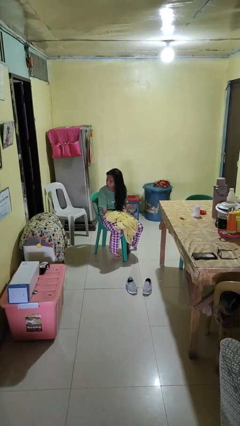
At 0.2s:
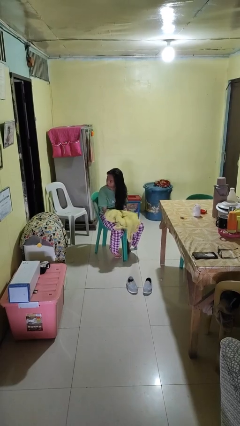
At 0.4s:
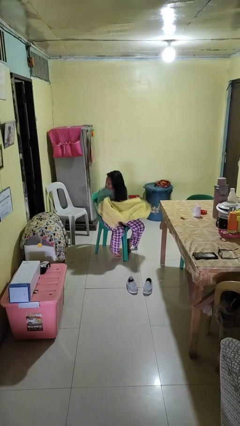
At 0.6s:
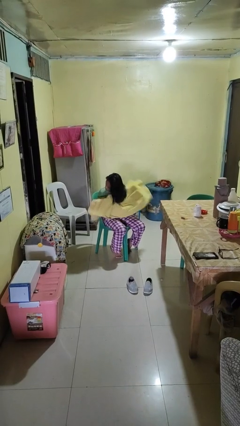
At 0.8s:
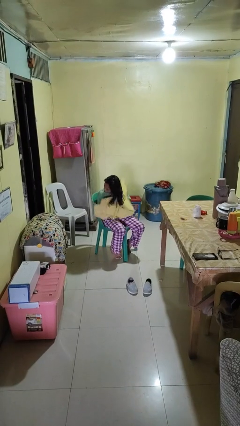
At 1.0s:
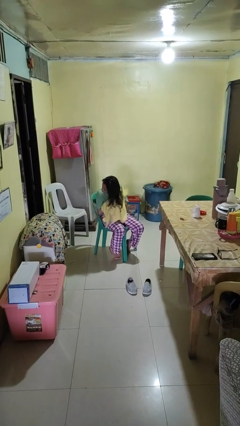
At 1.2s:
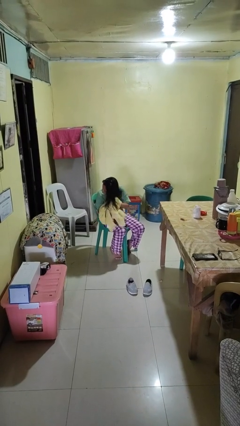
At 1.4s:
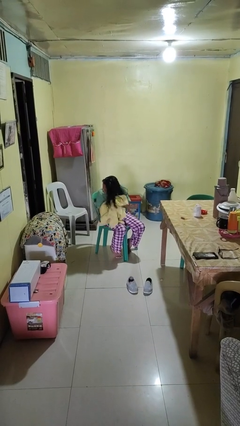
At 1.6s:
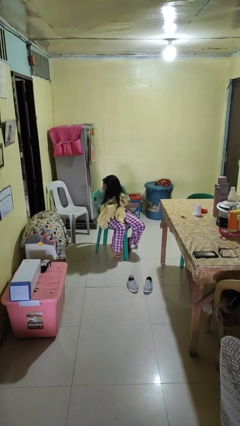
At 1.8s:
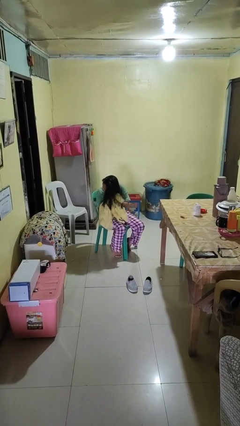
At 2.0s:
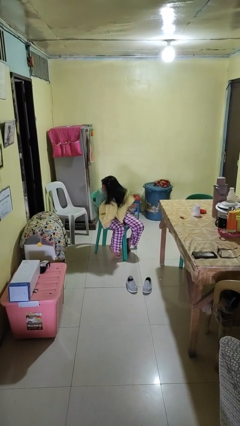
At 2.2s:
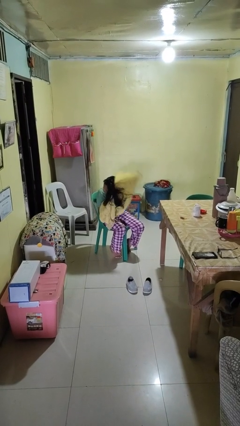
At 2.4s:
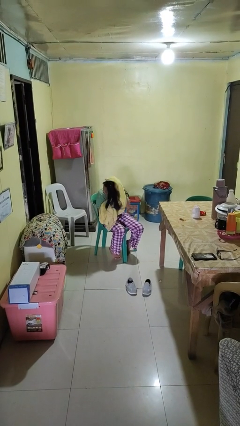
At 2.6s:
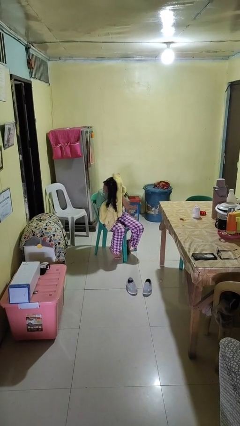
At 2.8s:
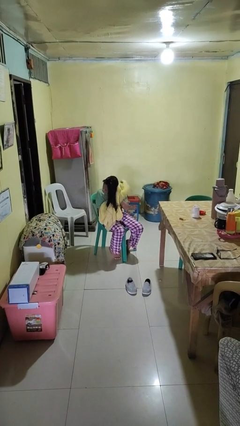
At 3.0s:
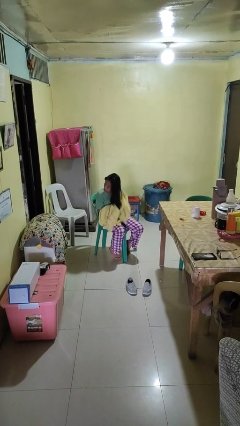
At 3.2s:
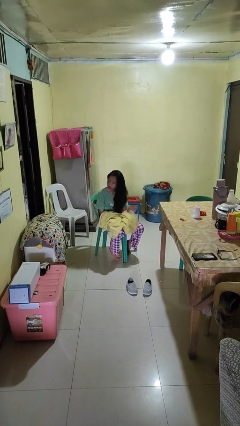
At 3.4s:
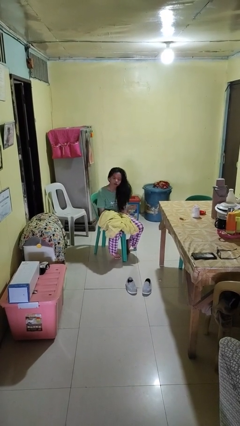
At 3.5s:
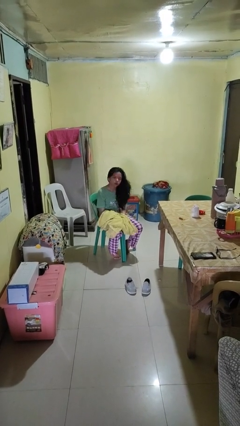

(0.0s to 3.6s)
person dries hair with towel

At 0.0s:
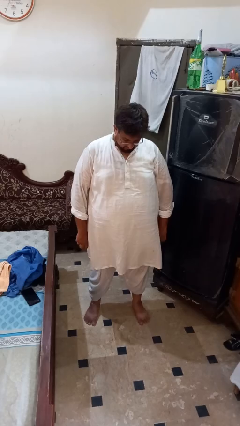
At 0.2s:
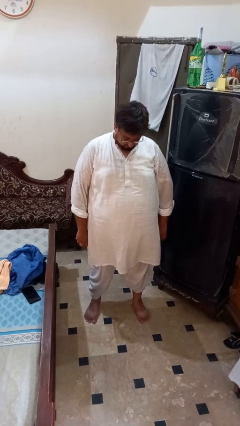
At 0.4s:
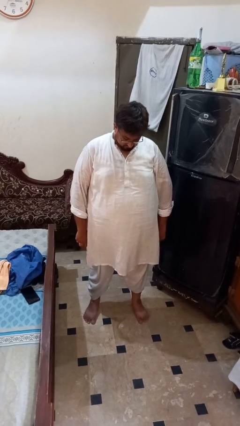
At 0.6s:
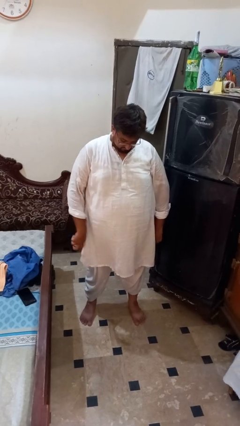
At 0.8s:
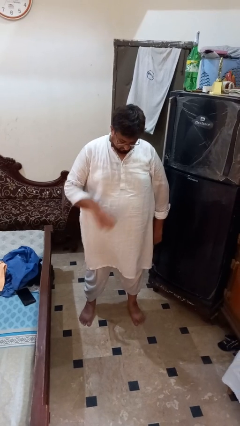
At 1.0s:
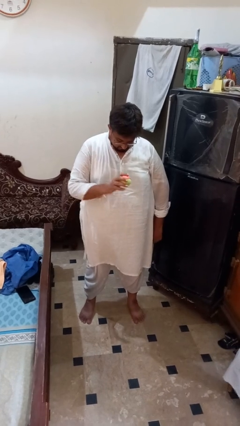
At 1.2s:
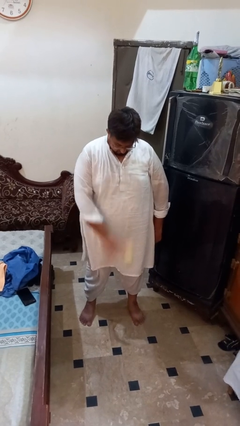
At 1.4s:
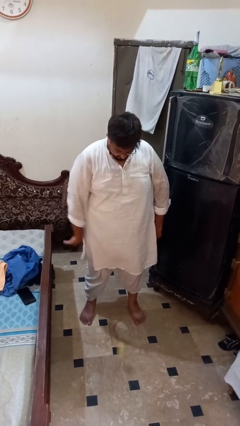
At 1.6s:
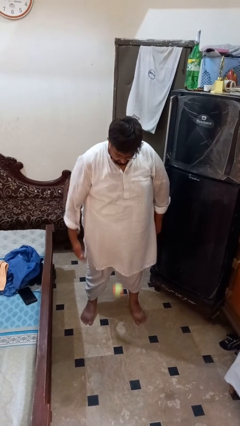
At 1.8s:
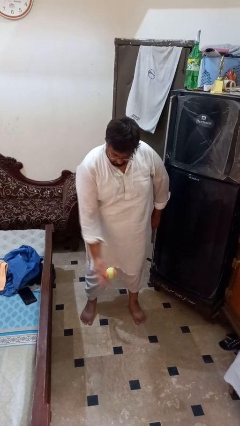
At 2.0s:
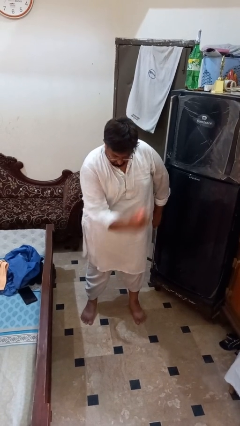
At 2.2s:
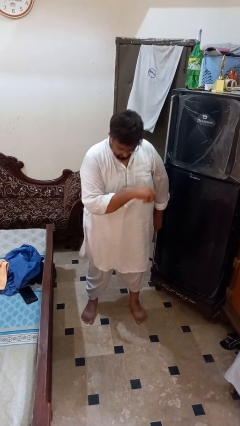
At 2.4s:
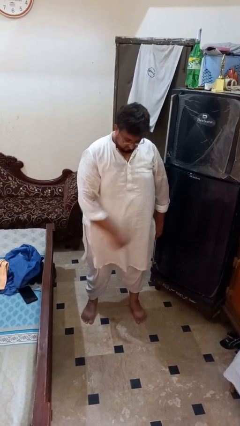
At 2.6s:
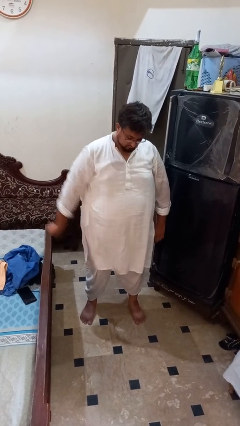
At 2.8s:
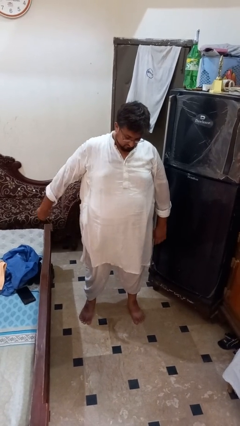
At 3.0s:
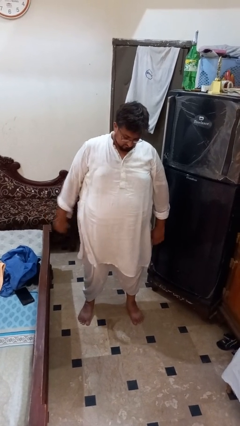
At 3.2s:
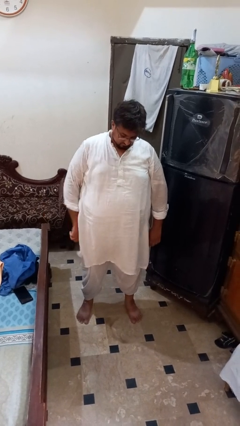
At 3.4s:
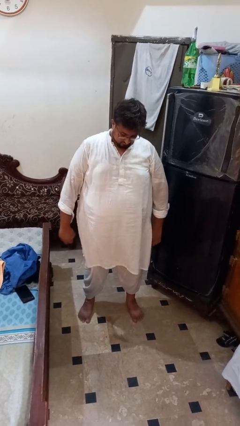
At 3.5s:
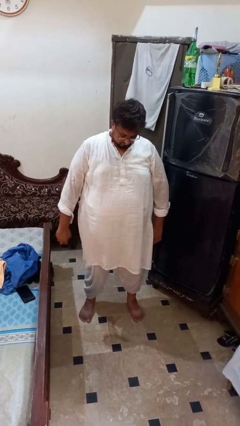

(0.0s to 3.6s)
person bounces ball on floor

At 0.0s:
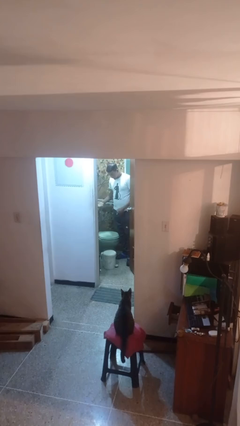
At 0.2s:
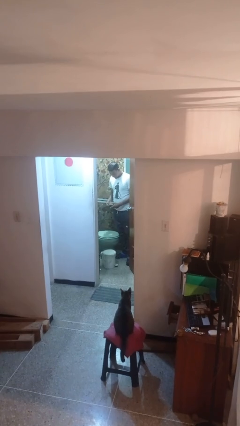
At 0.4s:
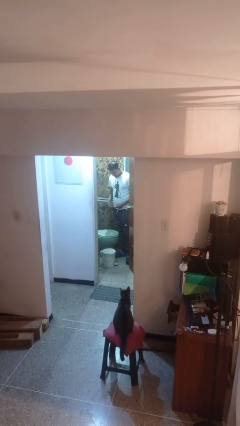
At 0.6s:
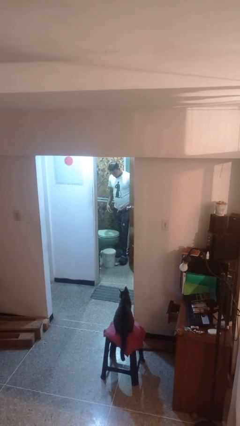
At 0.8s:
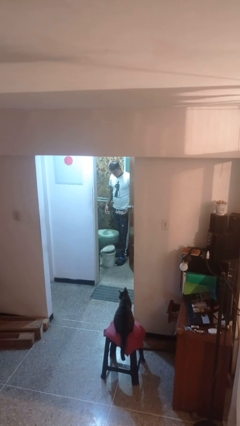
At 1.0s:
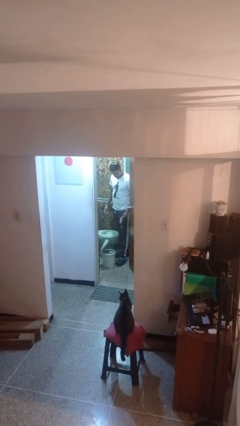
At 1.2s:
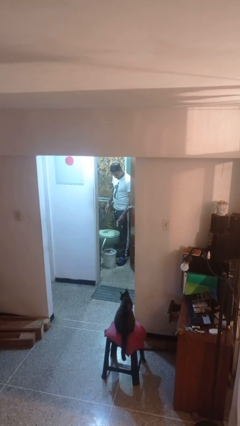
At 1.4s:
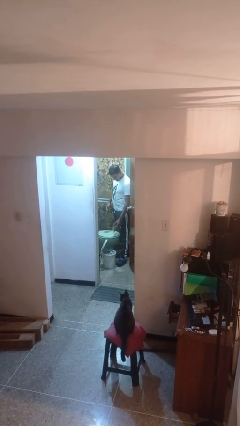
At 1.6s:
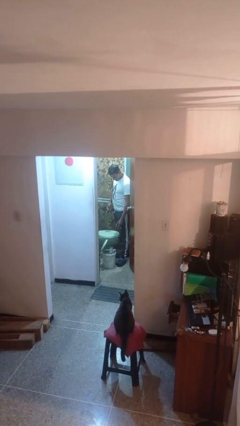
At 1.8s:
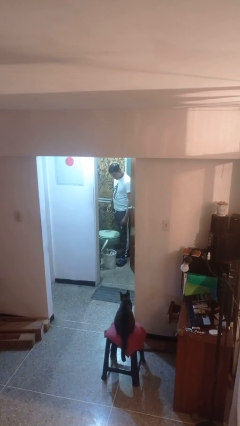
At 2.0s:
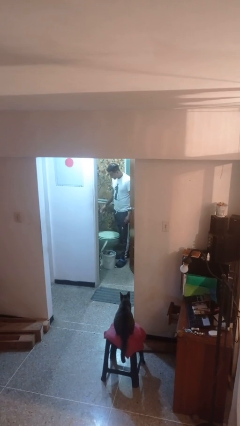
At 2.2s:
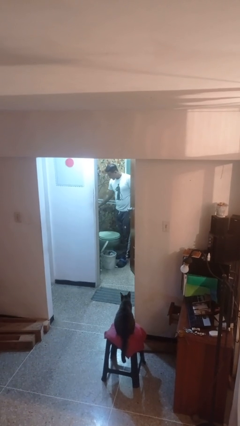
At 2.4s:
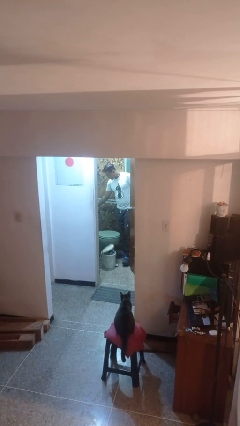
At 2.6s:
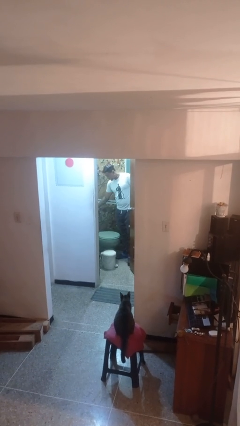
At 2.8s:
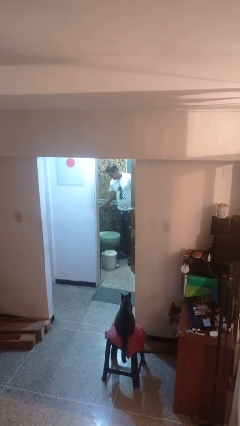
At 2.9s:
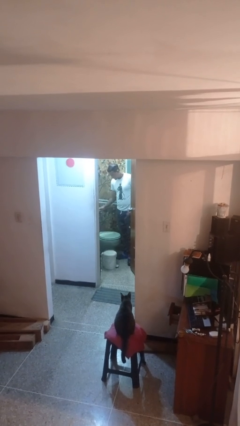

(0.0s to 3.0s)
person discards trash

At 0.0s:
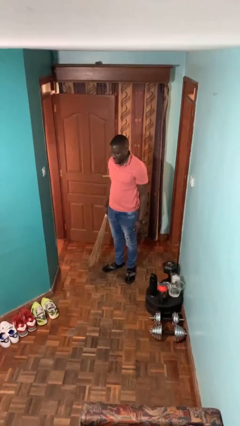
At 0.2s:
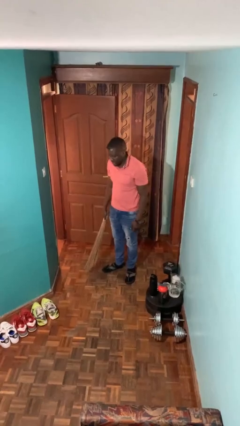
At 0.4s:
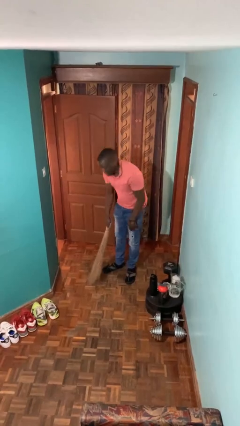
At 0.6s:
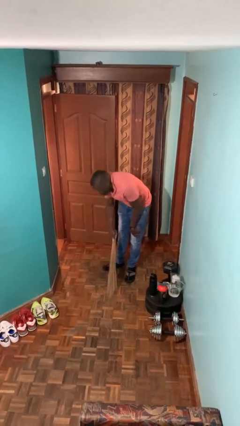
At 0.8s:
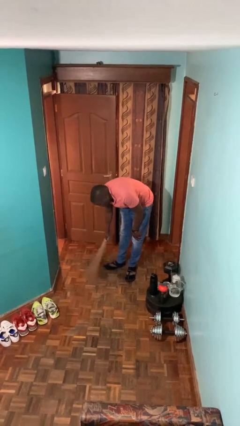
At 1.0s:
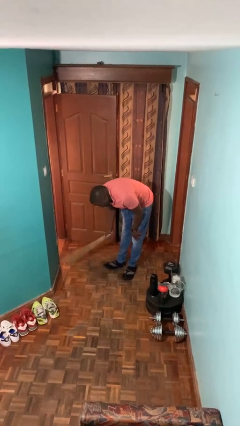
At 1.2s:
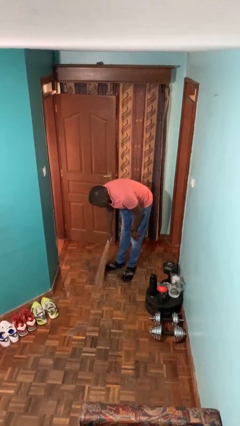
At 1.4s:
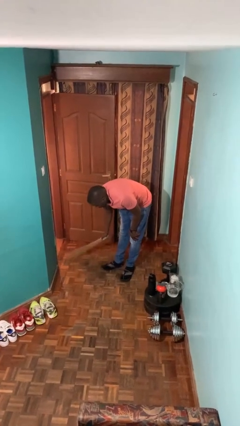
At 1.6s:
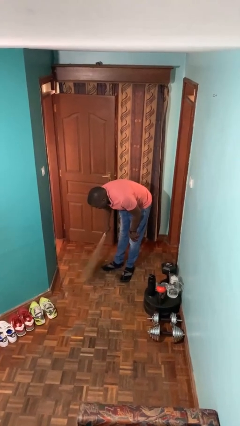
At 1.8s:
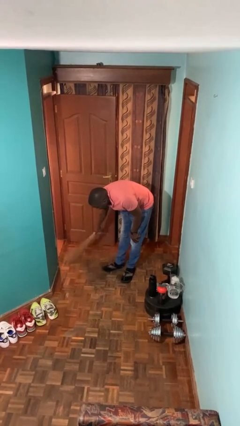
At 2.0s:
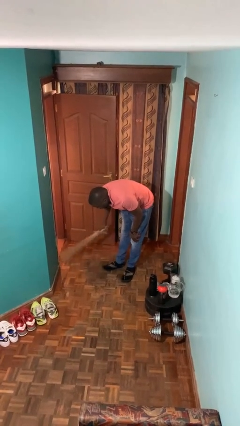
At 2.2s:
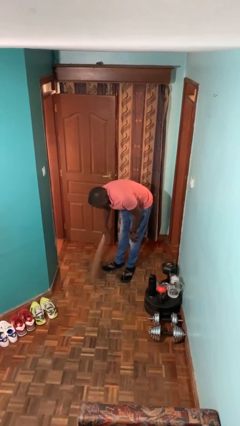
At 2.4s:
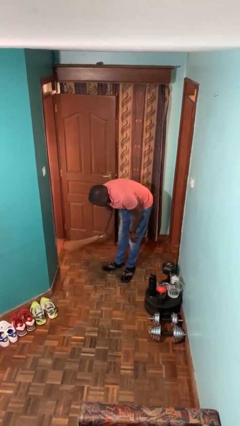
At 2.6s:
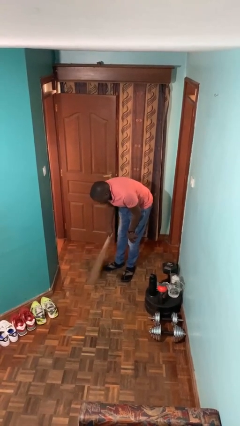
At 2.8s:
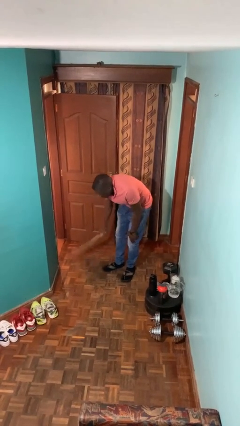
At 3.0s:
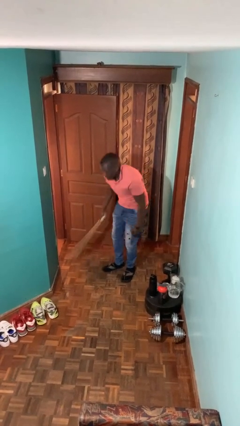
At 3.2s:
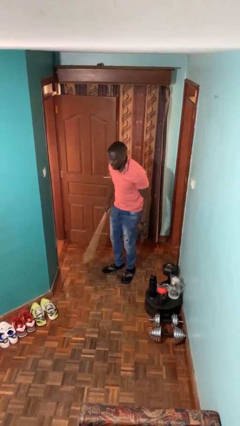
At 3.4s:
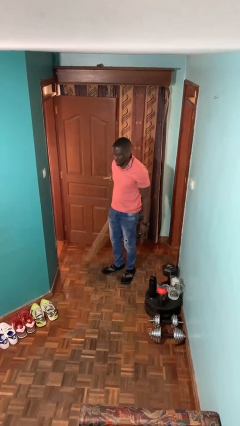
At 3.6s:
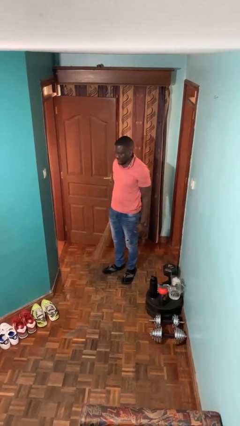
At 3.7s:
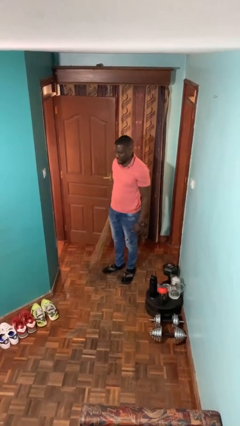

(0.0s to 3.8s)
person sweeps floor

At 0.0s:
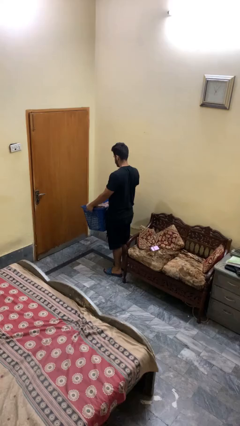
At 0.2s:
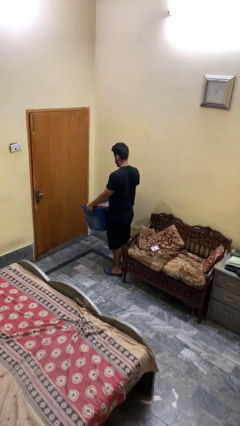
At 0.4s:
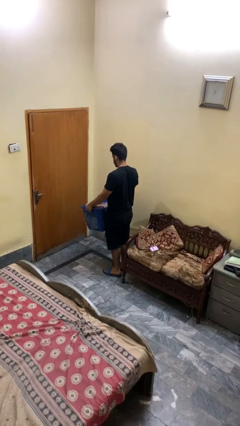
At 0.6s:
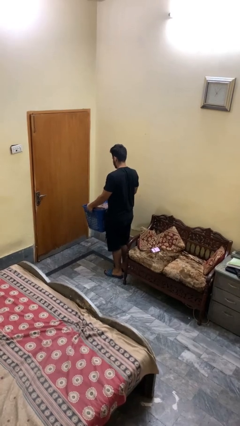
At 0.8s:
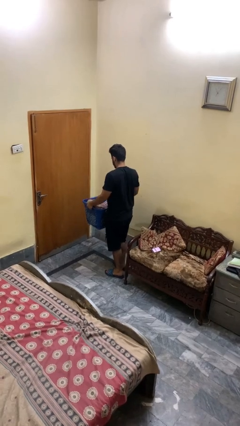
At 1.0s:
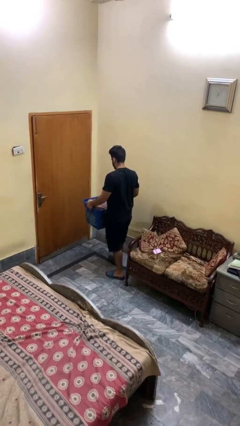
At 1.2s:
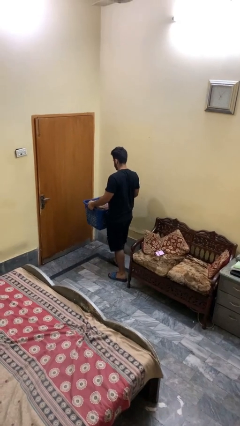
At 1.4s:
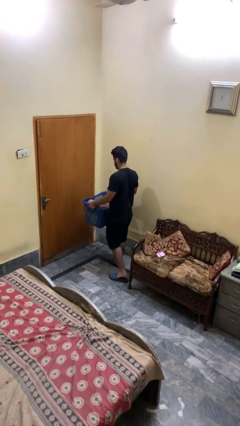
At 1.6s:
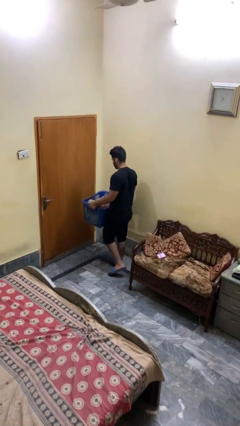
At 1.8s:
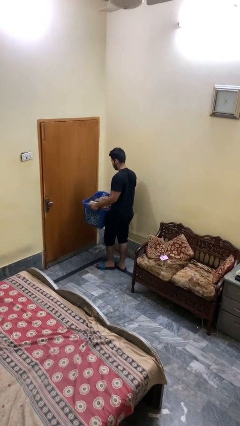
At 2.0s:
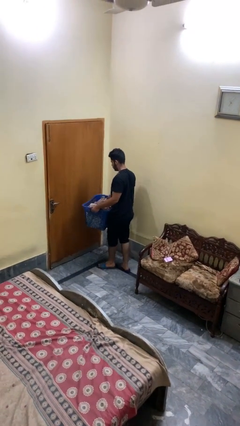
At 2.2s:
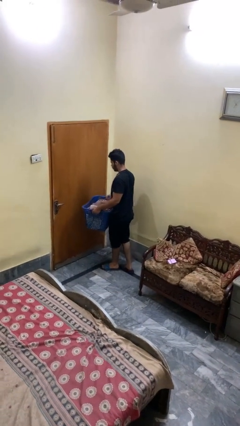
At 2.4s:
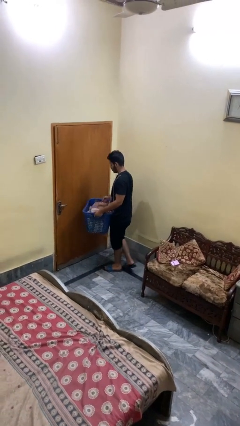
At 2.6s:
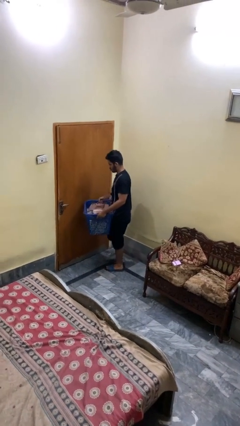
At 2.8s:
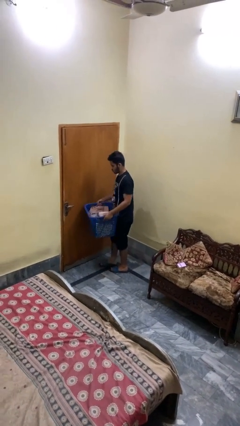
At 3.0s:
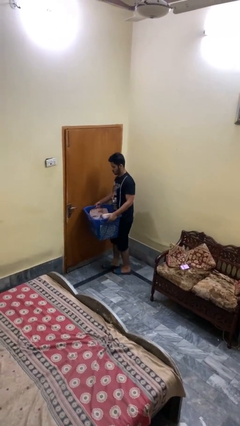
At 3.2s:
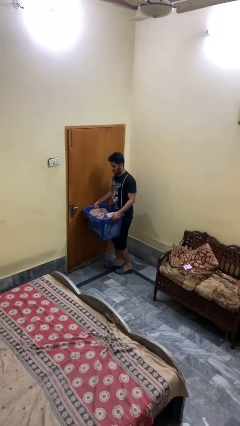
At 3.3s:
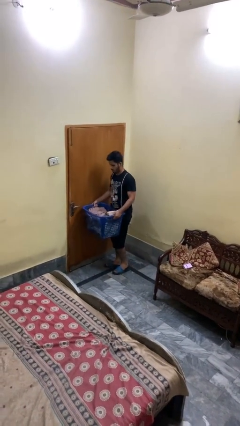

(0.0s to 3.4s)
person carries laundry basket
